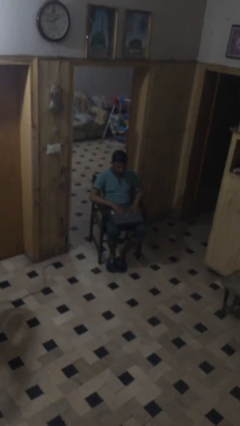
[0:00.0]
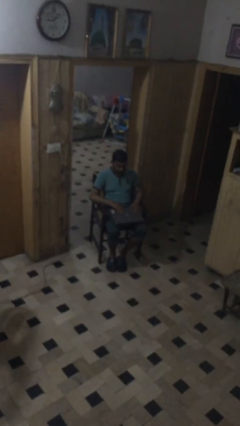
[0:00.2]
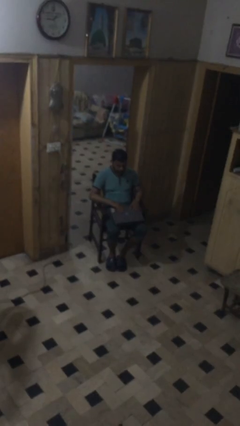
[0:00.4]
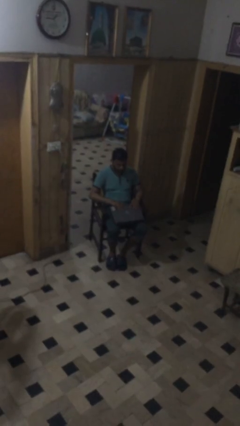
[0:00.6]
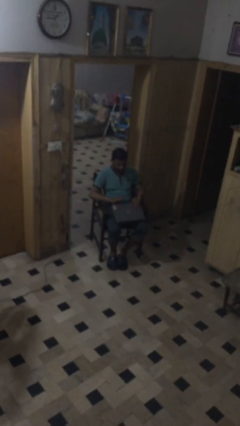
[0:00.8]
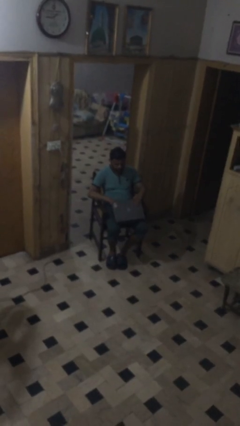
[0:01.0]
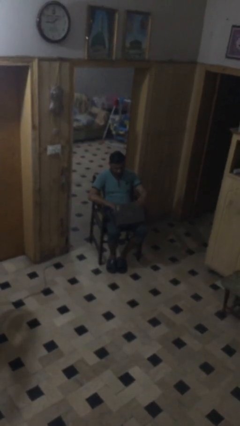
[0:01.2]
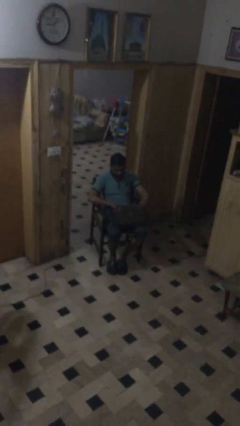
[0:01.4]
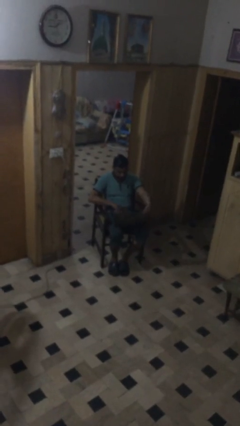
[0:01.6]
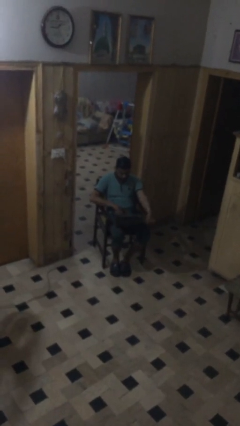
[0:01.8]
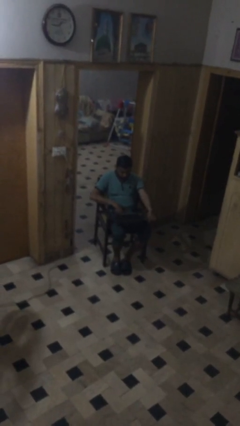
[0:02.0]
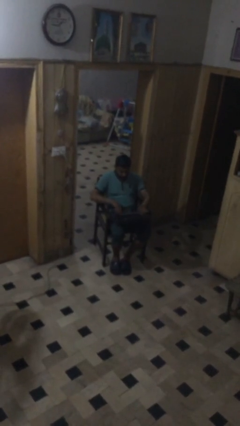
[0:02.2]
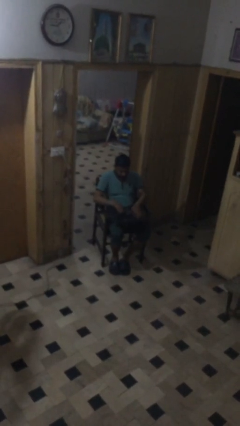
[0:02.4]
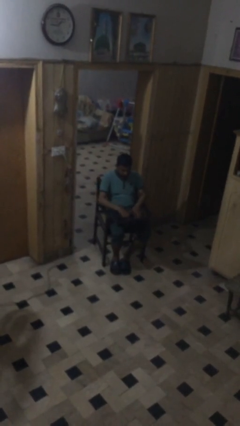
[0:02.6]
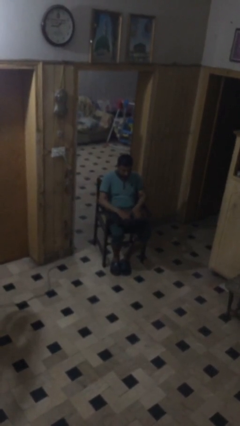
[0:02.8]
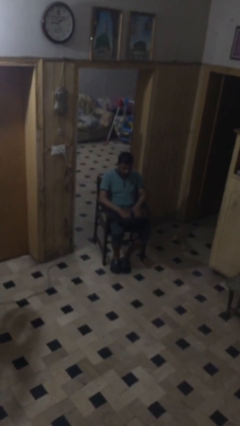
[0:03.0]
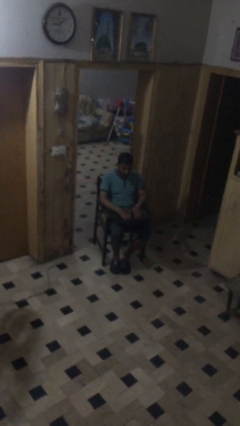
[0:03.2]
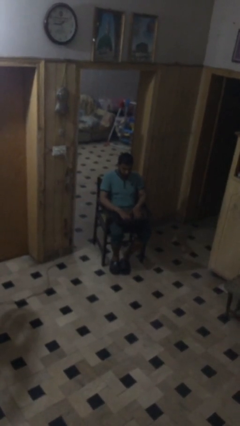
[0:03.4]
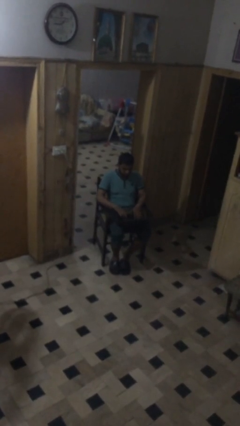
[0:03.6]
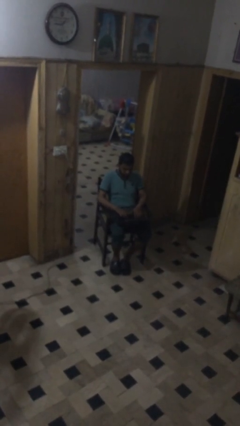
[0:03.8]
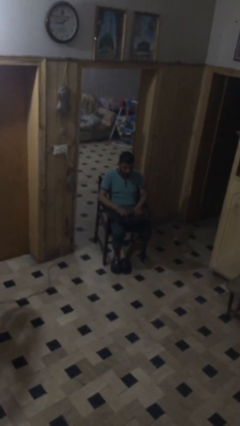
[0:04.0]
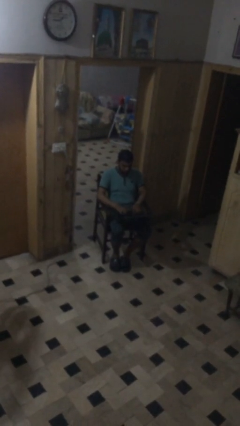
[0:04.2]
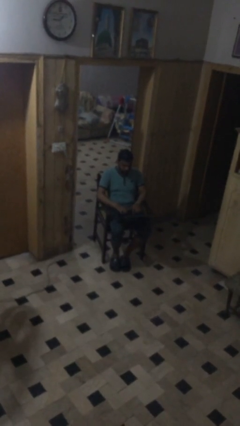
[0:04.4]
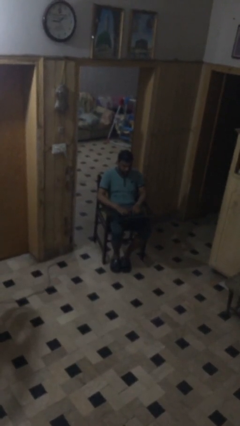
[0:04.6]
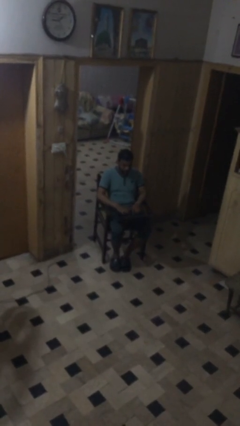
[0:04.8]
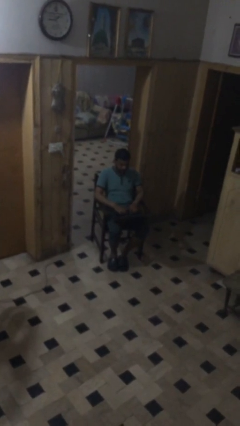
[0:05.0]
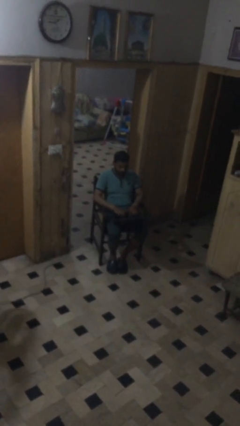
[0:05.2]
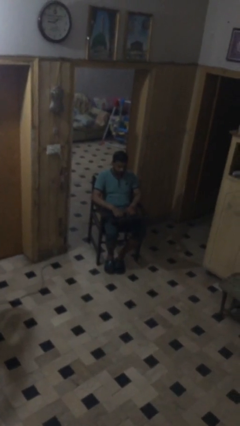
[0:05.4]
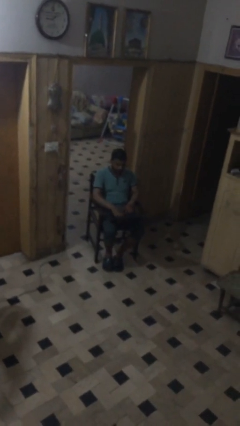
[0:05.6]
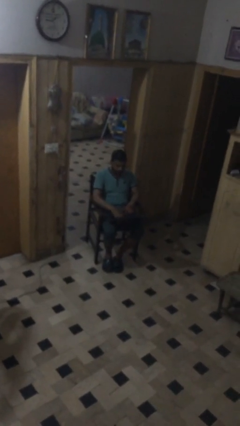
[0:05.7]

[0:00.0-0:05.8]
person interacts with laptop

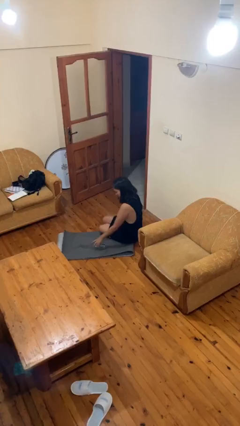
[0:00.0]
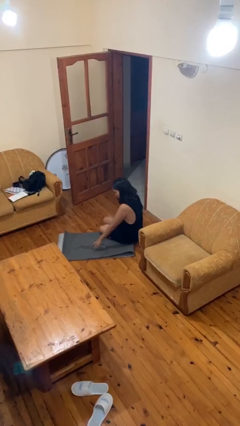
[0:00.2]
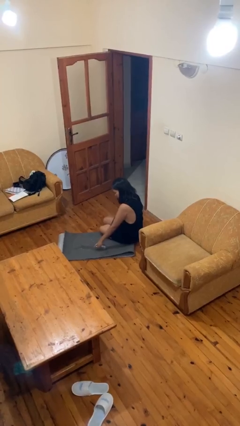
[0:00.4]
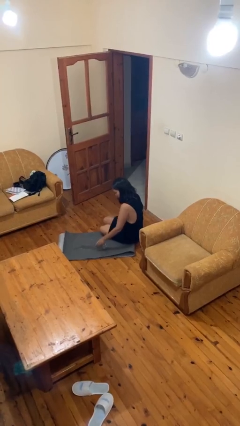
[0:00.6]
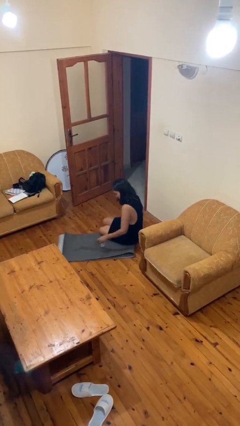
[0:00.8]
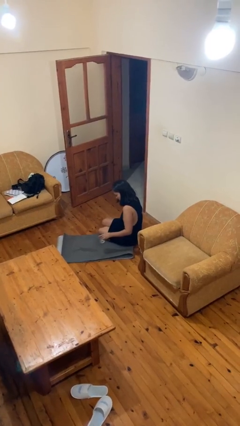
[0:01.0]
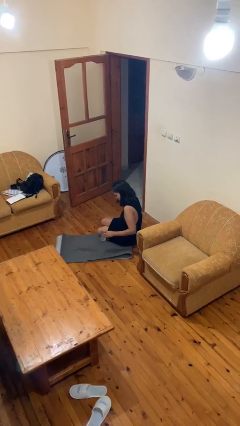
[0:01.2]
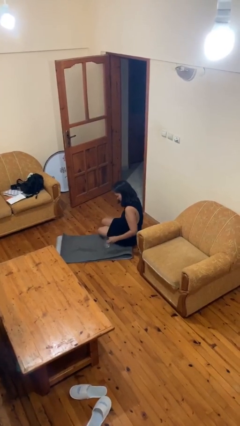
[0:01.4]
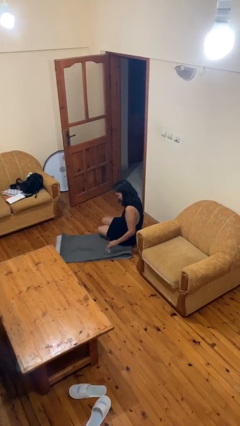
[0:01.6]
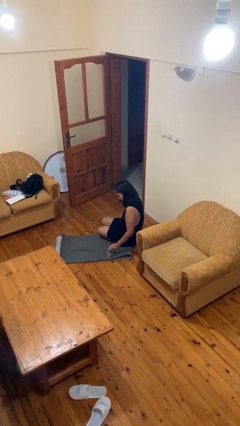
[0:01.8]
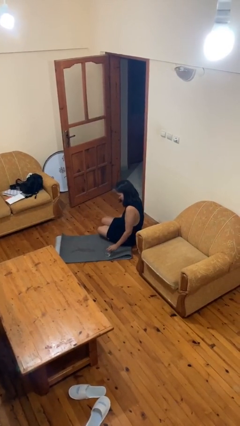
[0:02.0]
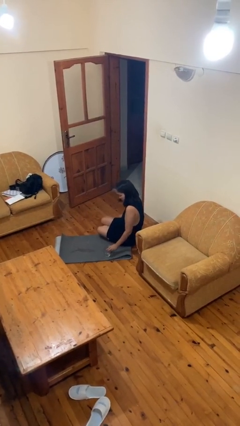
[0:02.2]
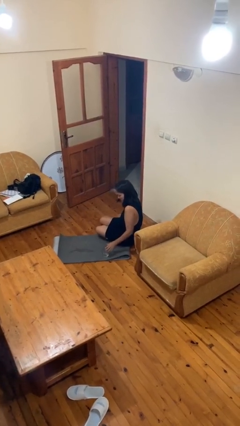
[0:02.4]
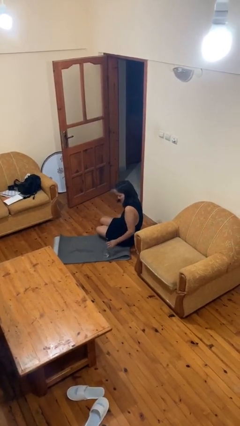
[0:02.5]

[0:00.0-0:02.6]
person sets upright glass

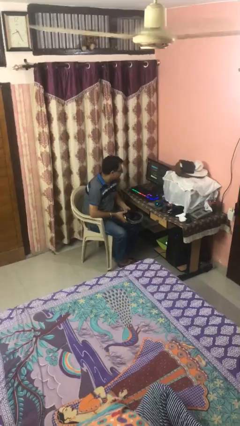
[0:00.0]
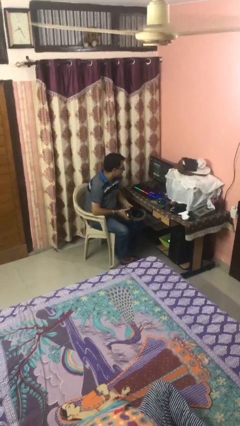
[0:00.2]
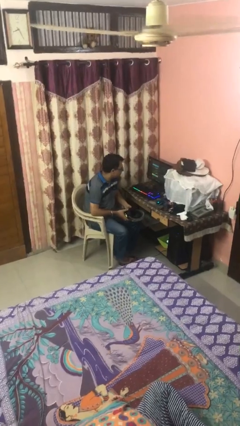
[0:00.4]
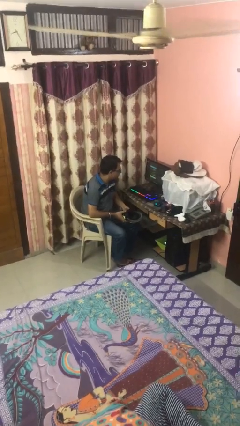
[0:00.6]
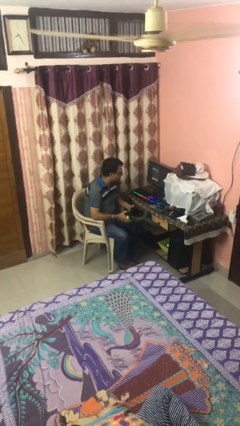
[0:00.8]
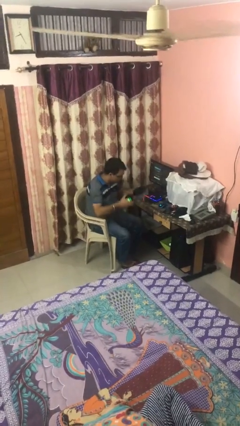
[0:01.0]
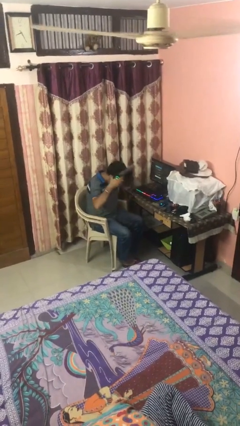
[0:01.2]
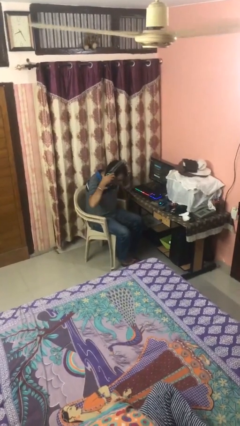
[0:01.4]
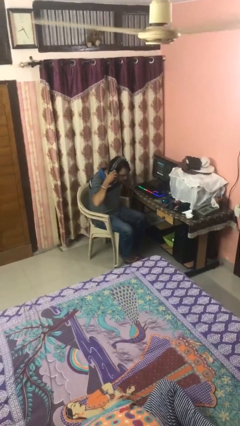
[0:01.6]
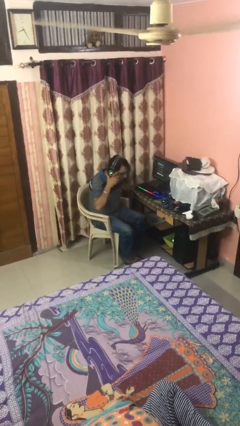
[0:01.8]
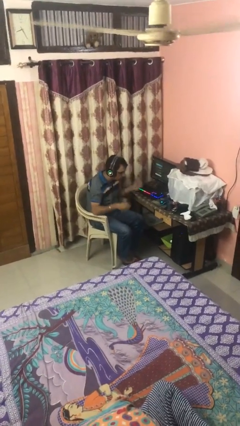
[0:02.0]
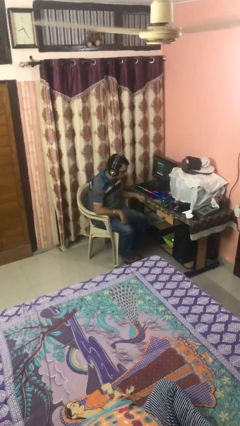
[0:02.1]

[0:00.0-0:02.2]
person puts on headphones

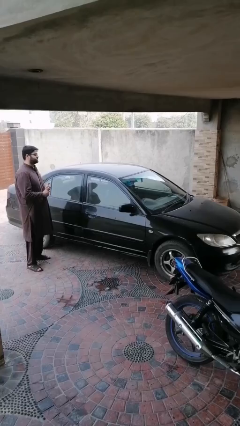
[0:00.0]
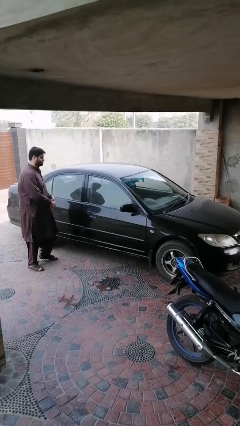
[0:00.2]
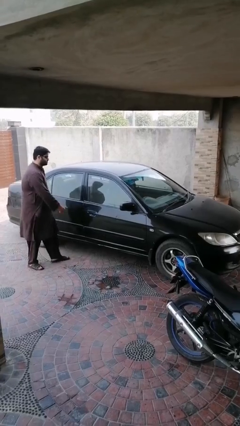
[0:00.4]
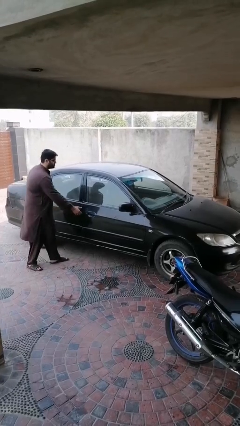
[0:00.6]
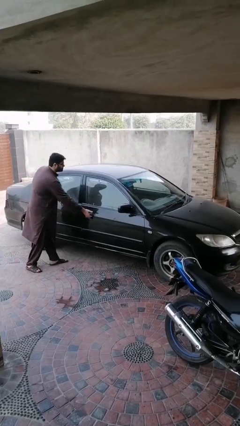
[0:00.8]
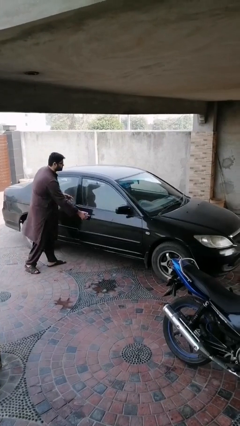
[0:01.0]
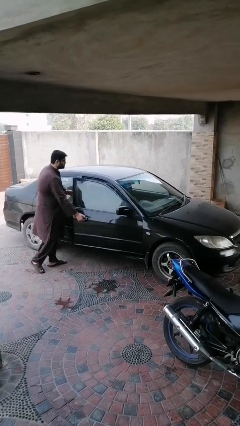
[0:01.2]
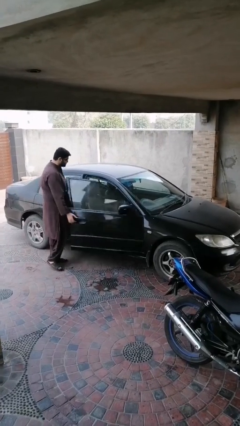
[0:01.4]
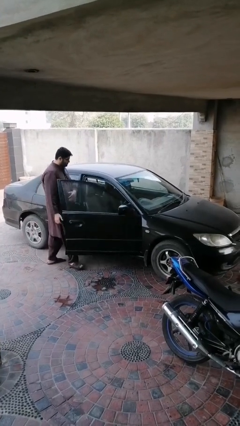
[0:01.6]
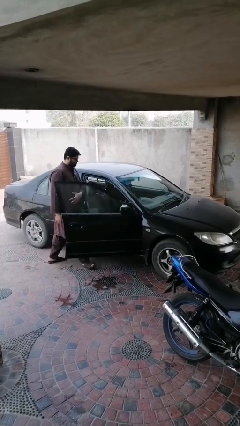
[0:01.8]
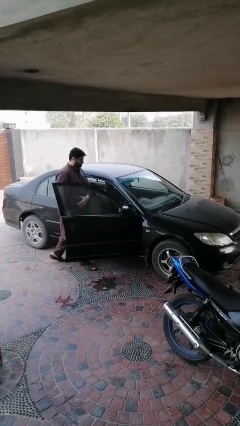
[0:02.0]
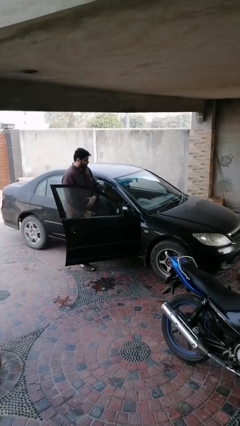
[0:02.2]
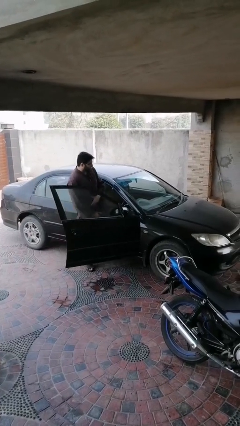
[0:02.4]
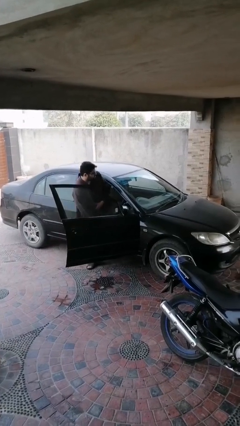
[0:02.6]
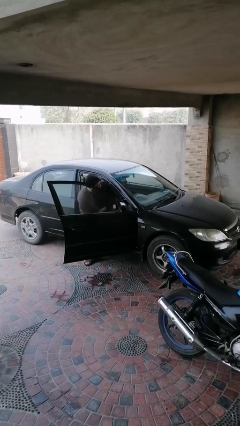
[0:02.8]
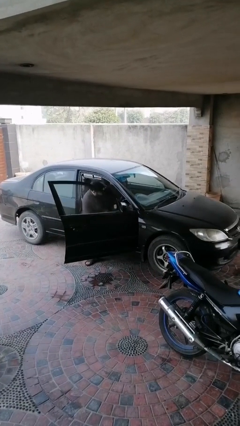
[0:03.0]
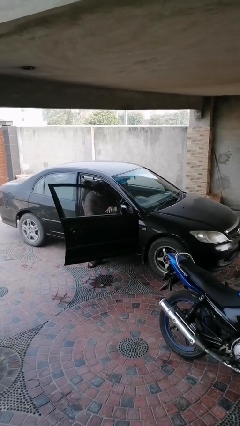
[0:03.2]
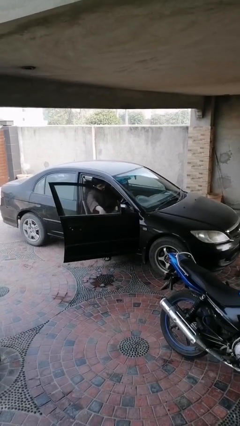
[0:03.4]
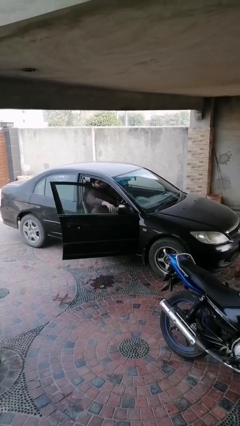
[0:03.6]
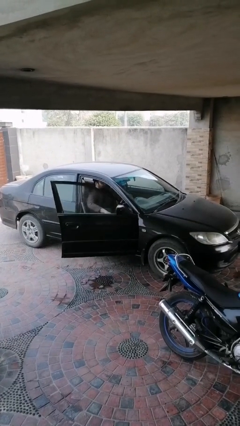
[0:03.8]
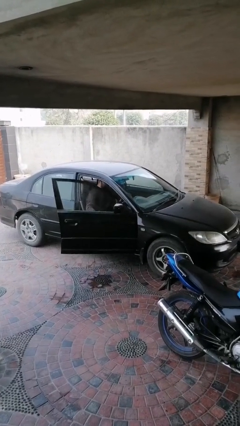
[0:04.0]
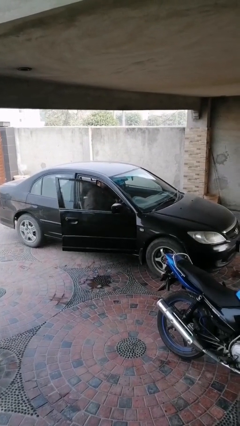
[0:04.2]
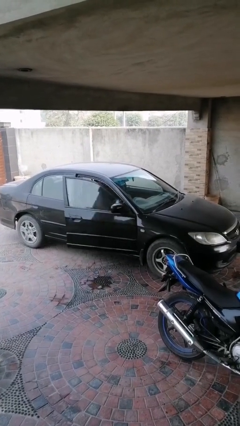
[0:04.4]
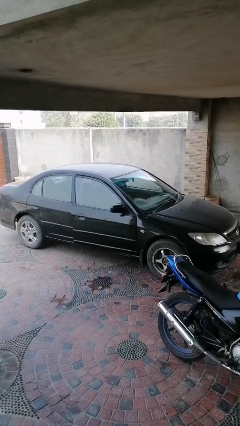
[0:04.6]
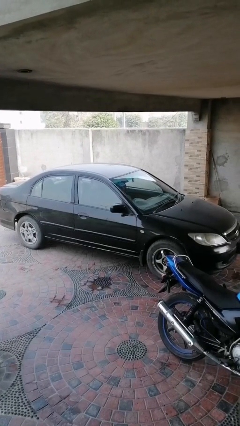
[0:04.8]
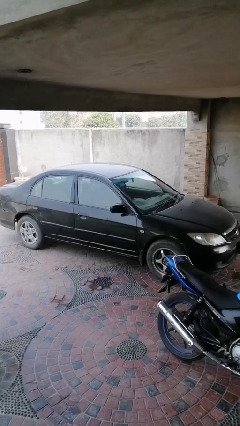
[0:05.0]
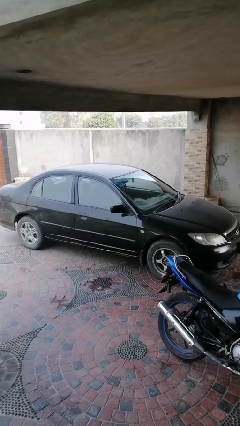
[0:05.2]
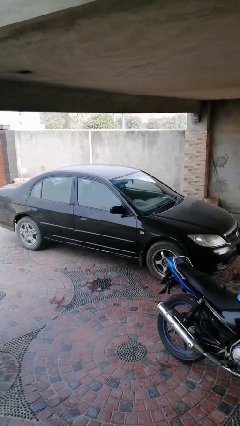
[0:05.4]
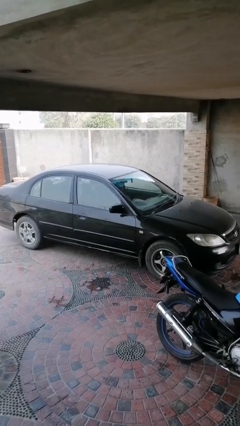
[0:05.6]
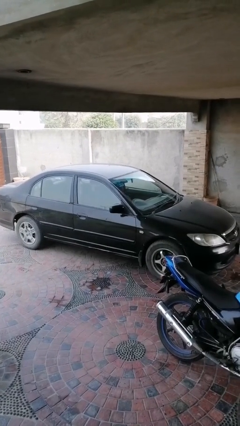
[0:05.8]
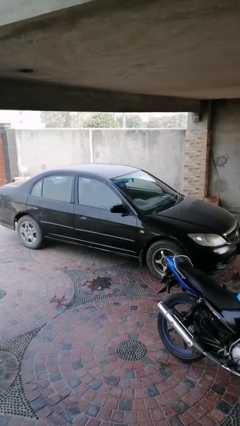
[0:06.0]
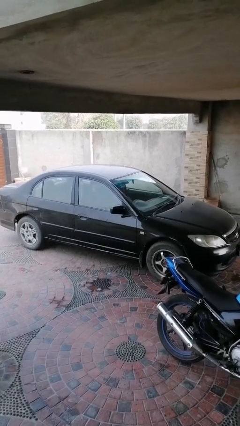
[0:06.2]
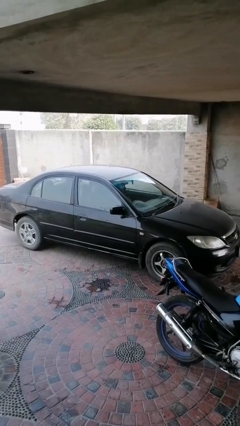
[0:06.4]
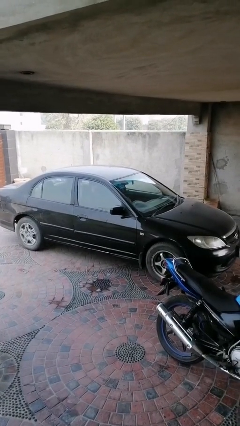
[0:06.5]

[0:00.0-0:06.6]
car picks up person

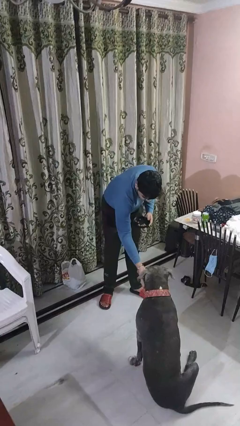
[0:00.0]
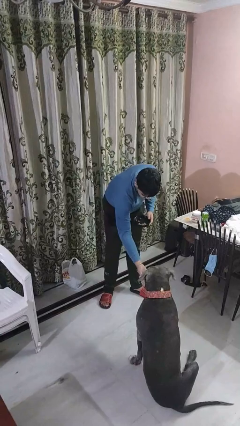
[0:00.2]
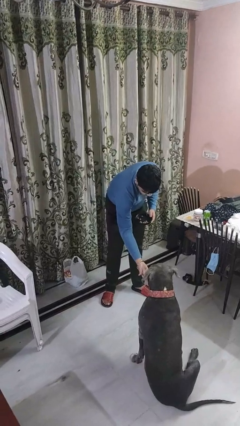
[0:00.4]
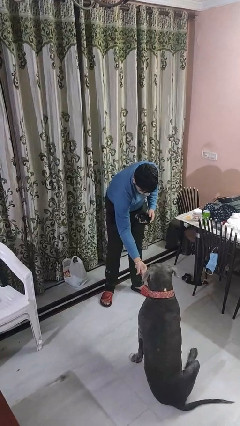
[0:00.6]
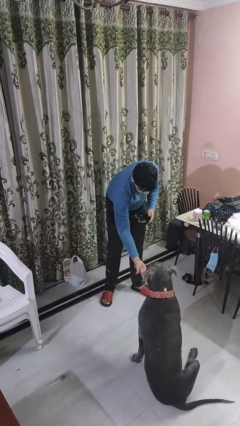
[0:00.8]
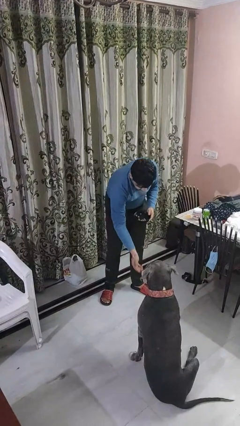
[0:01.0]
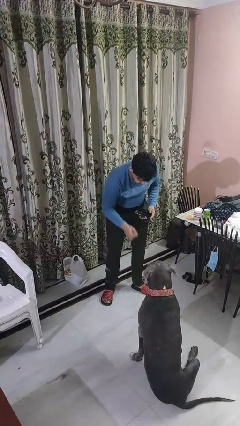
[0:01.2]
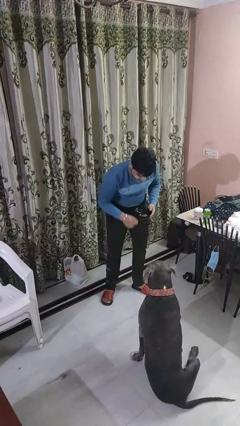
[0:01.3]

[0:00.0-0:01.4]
person feeds dog
